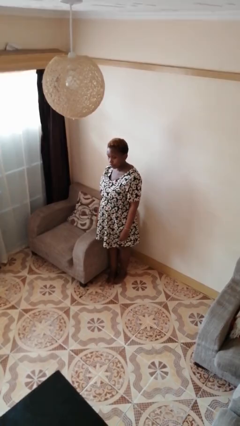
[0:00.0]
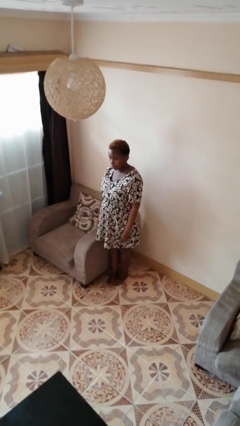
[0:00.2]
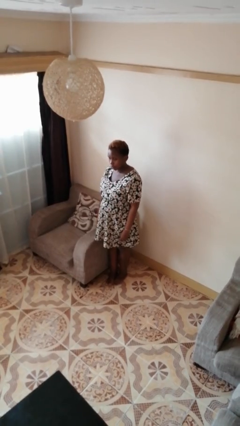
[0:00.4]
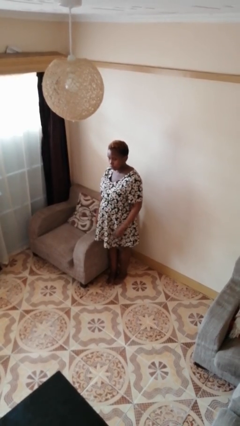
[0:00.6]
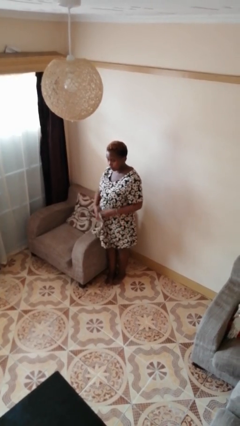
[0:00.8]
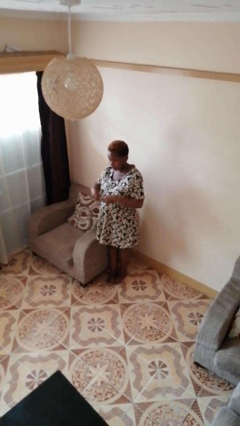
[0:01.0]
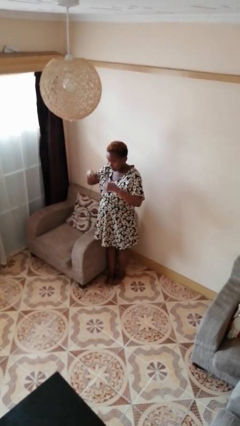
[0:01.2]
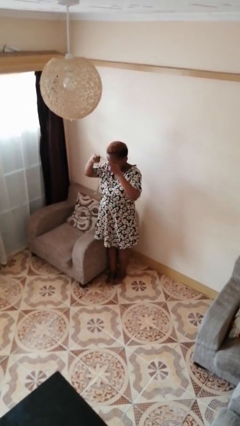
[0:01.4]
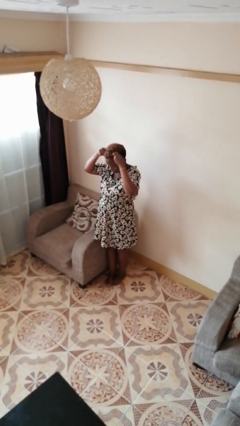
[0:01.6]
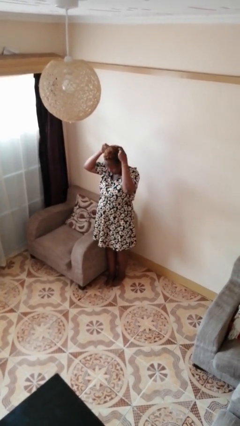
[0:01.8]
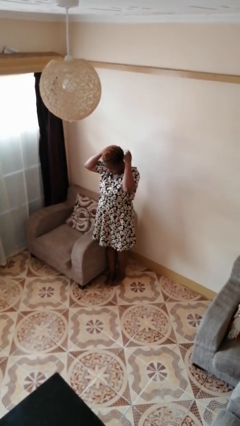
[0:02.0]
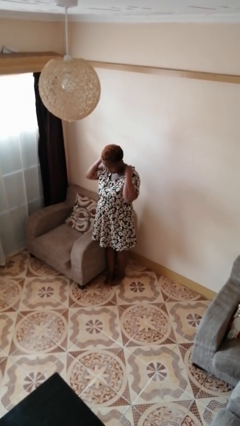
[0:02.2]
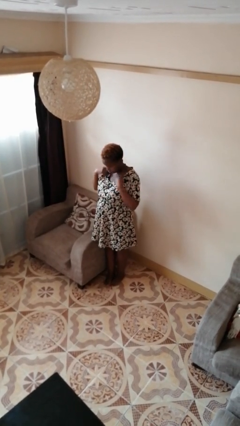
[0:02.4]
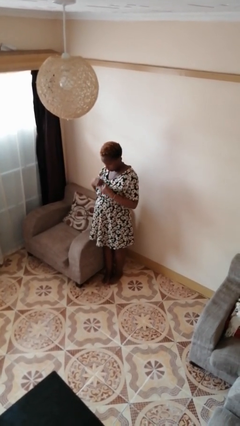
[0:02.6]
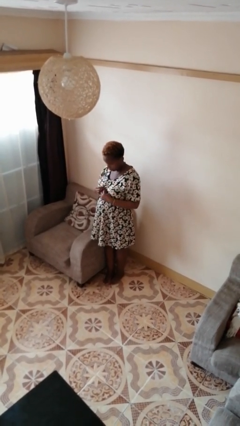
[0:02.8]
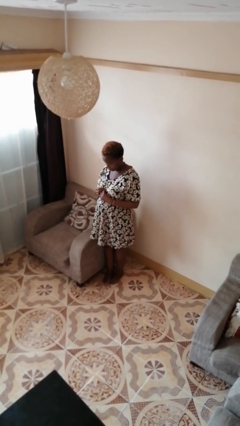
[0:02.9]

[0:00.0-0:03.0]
person puts on necklace

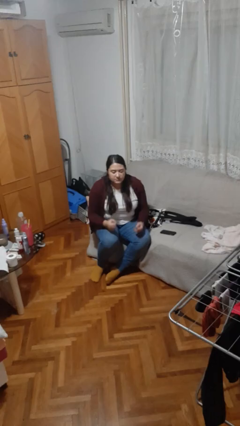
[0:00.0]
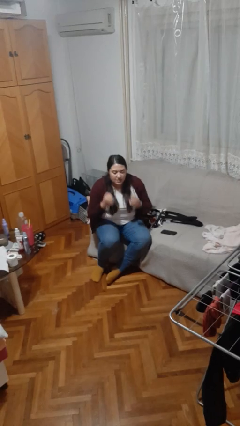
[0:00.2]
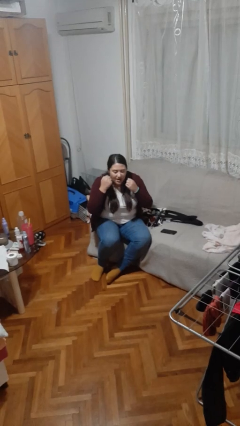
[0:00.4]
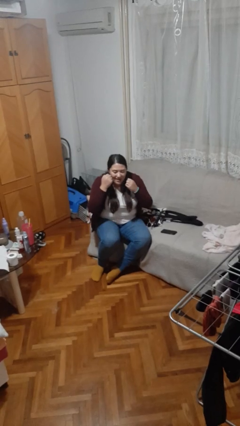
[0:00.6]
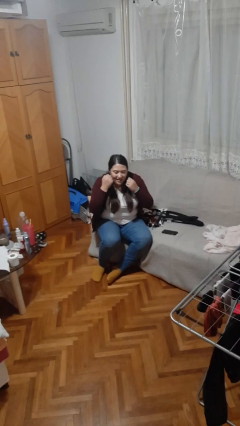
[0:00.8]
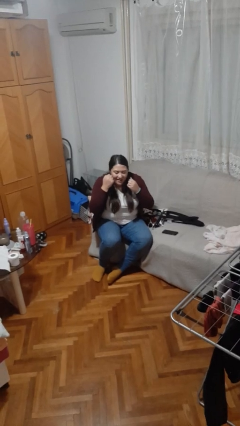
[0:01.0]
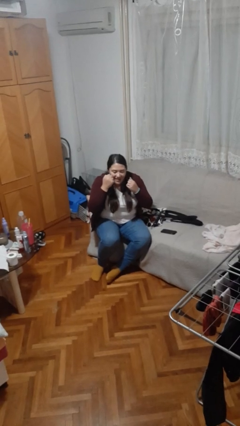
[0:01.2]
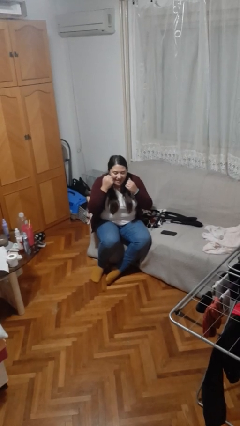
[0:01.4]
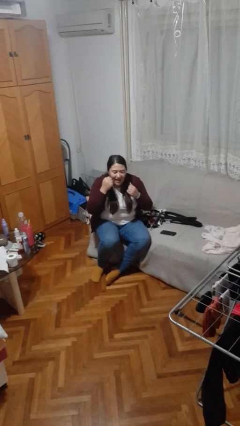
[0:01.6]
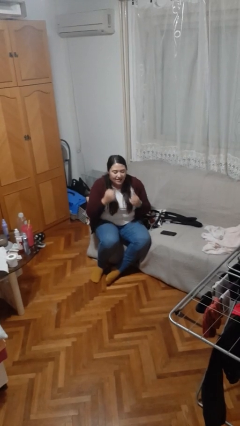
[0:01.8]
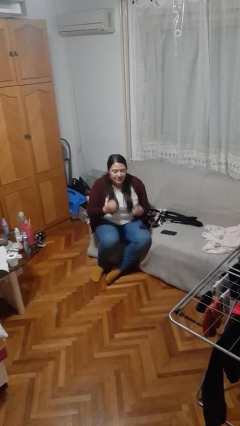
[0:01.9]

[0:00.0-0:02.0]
person flosses

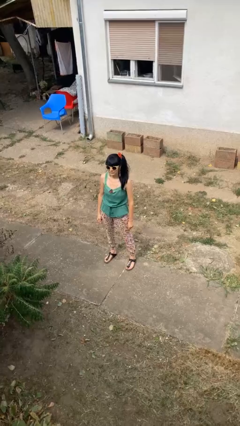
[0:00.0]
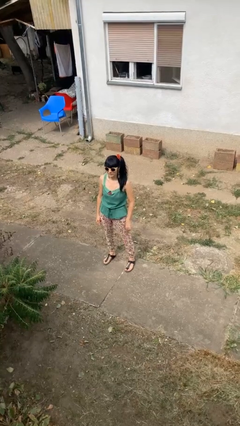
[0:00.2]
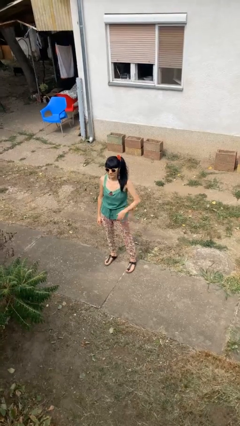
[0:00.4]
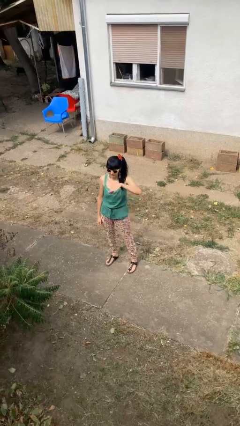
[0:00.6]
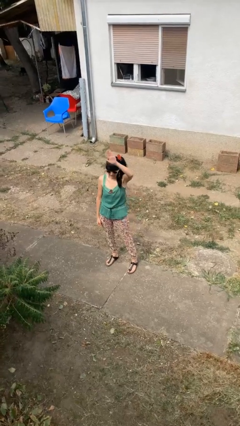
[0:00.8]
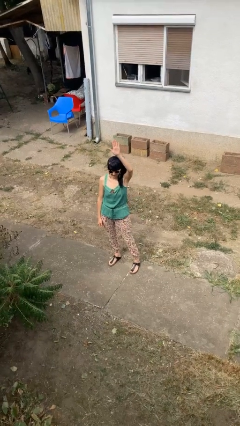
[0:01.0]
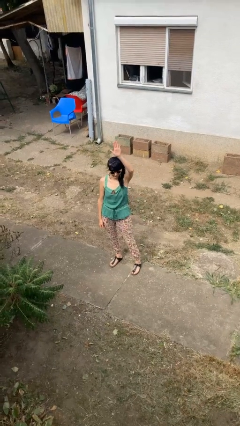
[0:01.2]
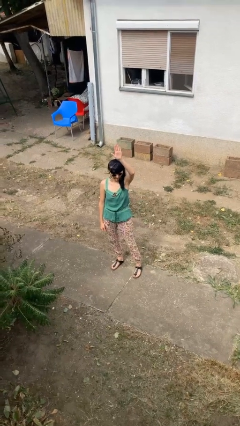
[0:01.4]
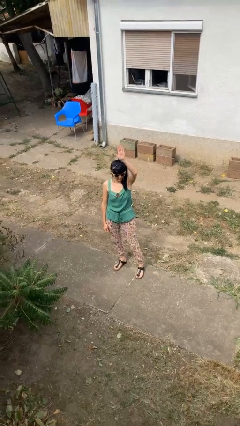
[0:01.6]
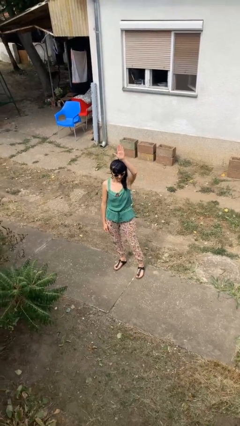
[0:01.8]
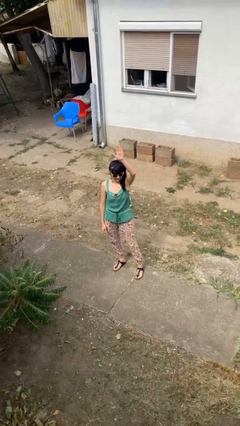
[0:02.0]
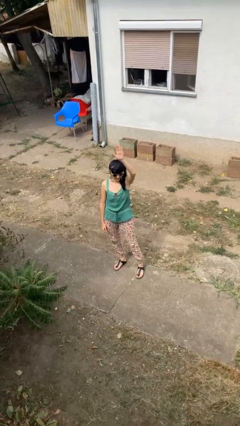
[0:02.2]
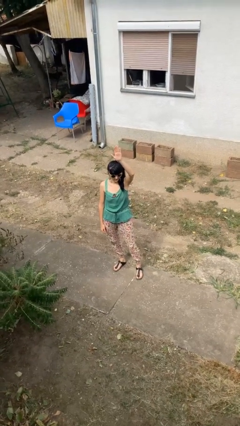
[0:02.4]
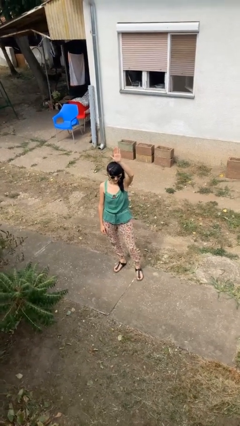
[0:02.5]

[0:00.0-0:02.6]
person gestures raise hand

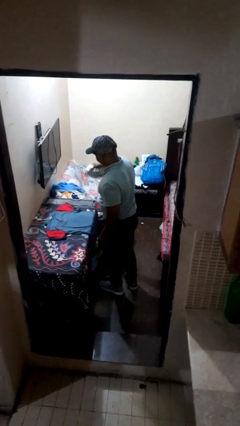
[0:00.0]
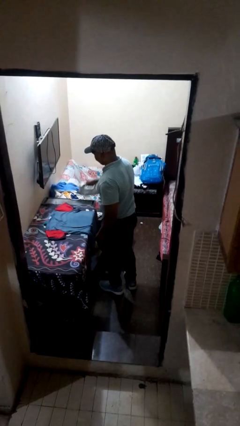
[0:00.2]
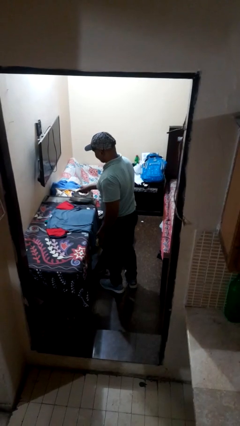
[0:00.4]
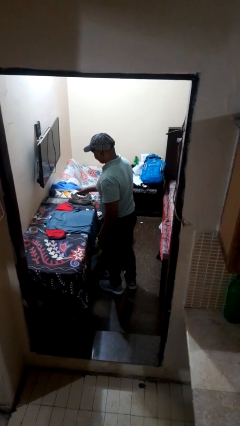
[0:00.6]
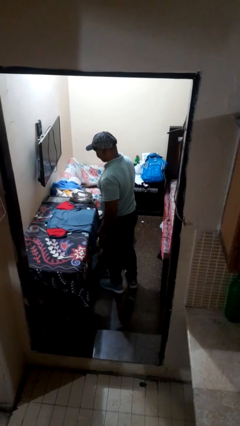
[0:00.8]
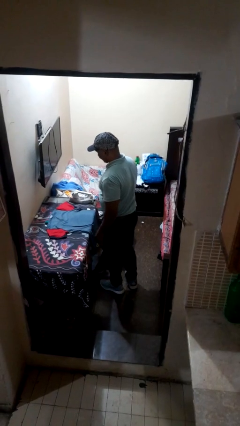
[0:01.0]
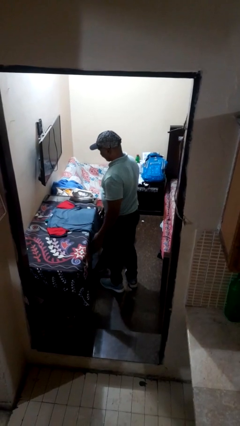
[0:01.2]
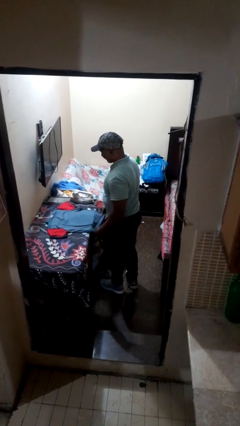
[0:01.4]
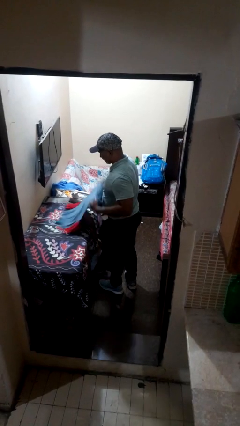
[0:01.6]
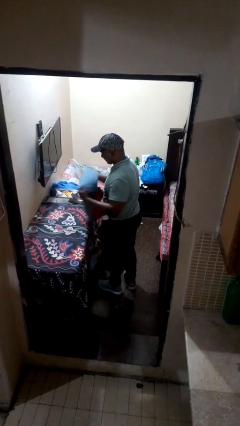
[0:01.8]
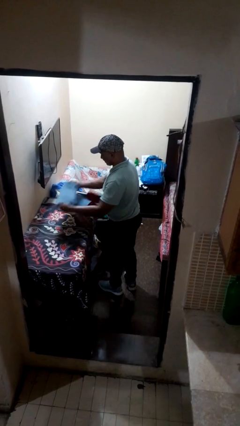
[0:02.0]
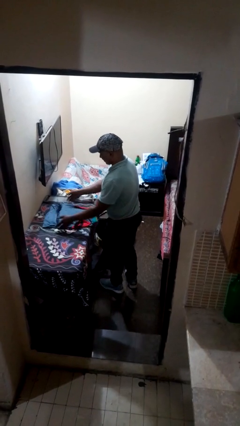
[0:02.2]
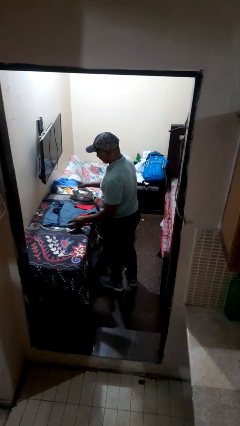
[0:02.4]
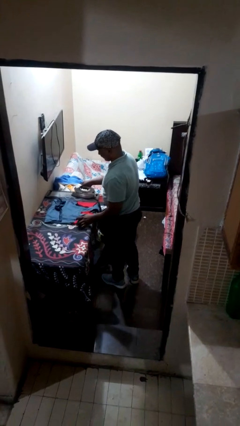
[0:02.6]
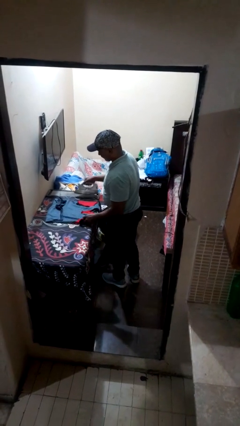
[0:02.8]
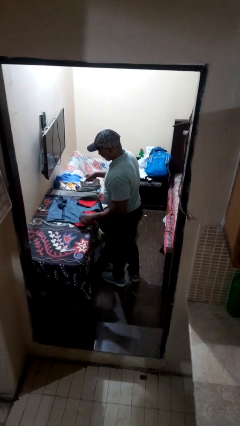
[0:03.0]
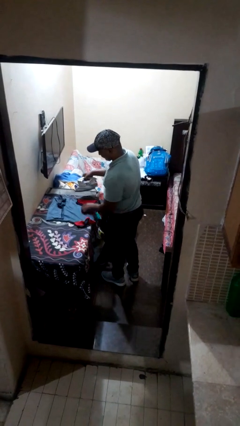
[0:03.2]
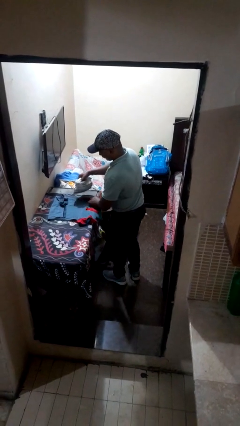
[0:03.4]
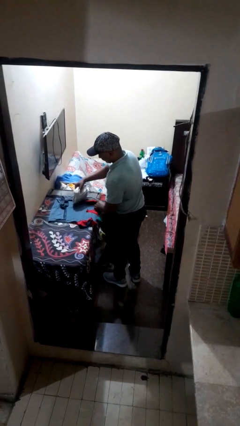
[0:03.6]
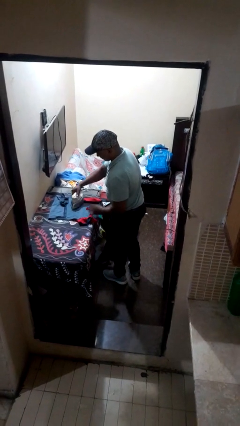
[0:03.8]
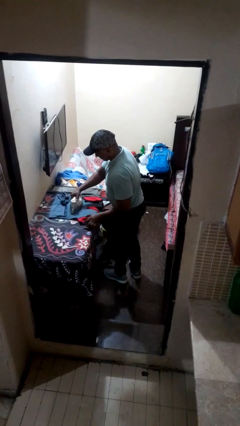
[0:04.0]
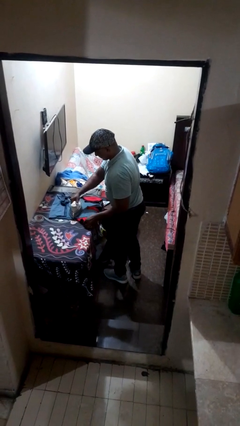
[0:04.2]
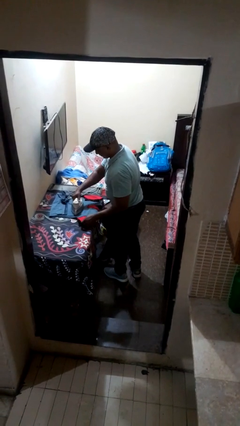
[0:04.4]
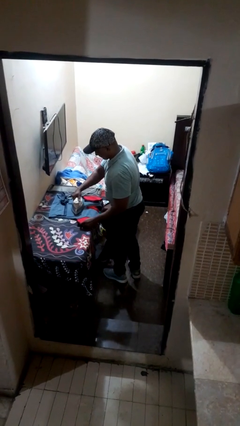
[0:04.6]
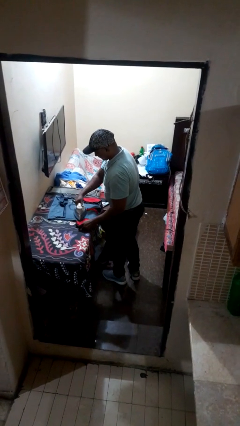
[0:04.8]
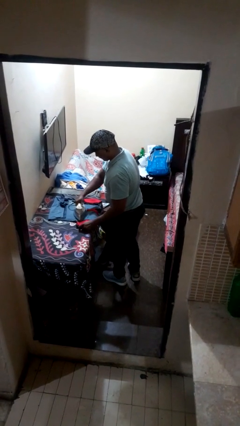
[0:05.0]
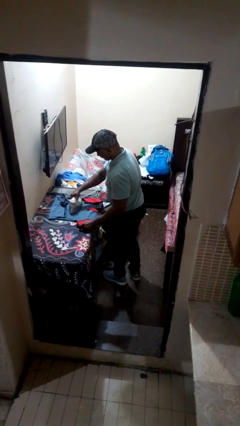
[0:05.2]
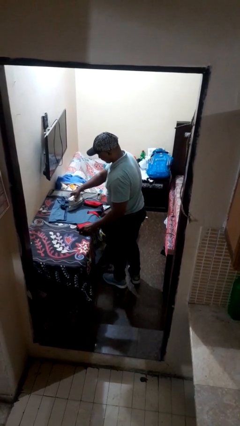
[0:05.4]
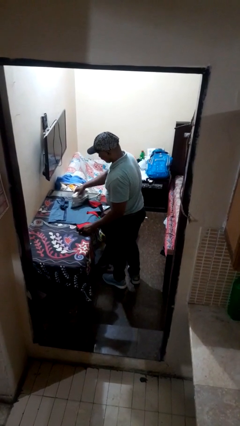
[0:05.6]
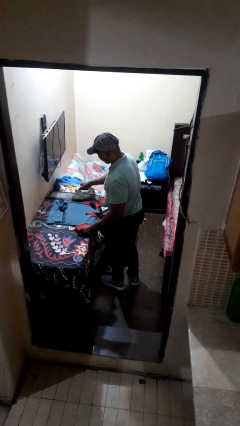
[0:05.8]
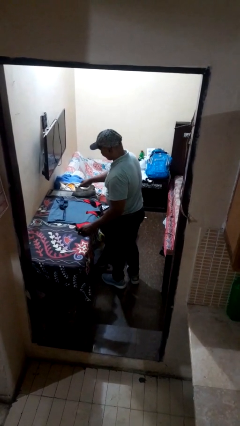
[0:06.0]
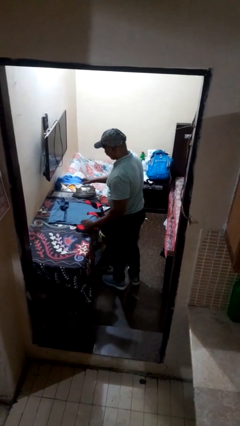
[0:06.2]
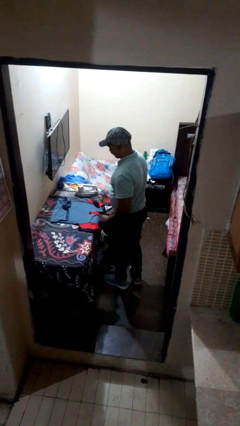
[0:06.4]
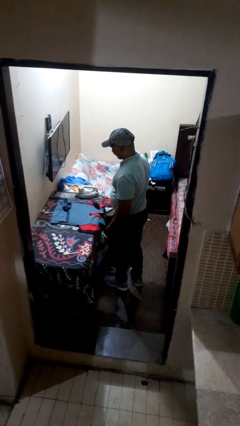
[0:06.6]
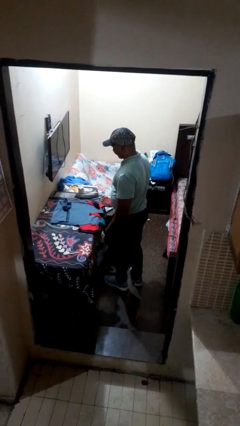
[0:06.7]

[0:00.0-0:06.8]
person irons clothes

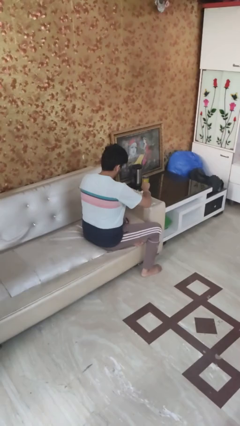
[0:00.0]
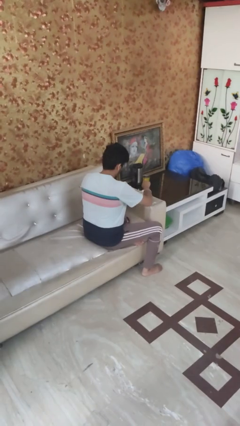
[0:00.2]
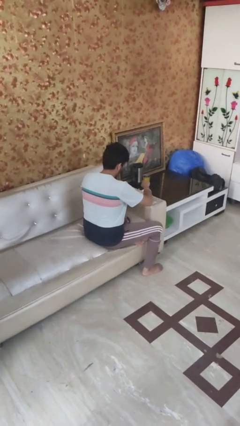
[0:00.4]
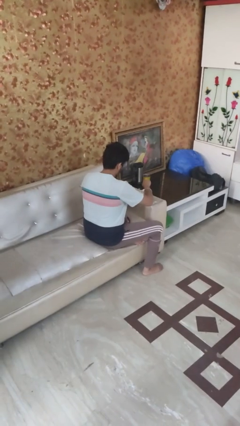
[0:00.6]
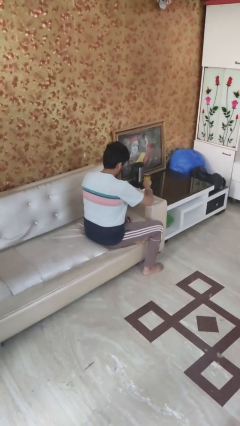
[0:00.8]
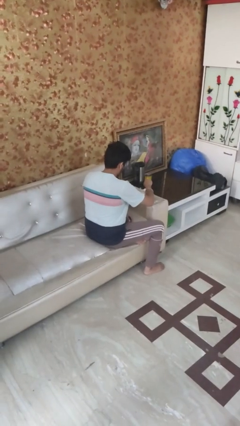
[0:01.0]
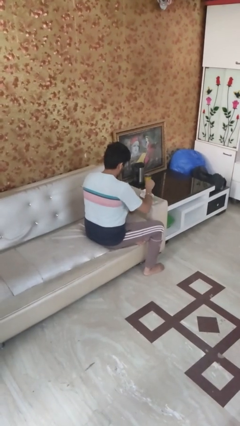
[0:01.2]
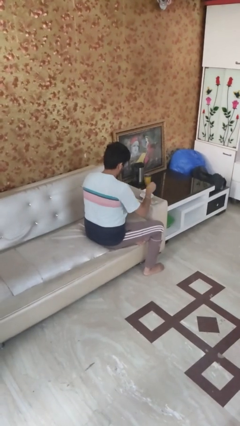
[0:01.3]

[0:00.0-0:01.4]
person stirs mug

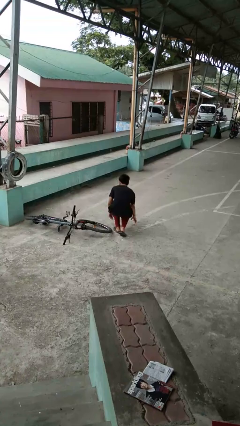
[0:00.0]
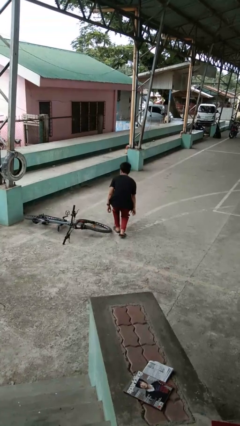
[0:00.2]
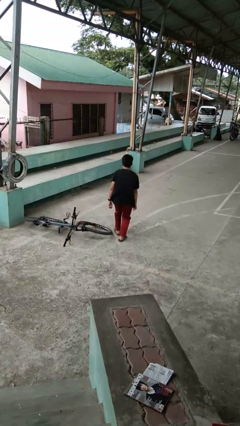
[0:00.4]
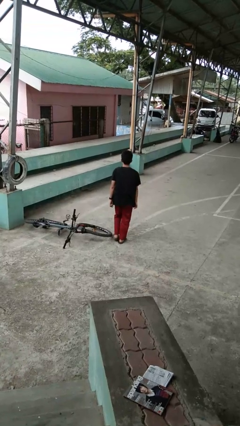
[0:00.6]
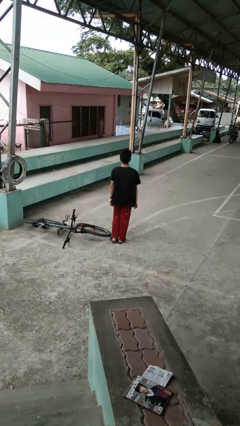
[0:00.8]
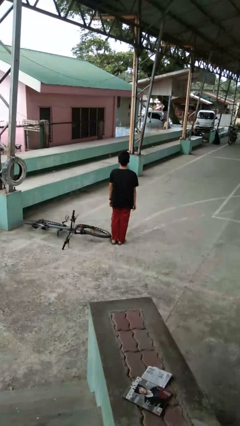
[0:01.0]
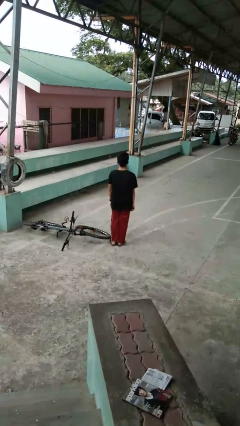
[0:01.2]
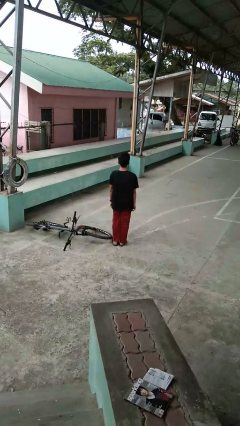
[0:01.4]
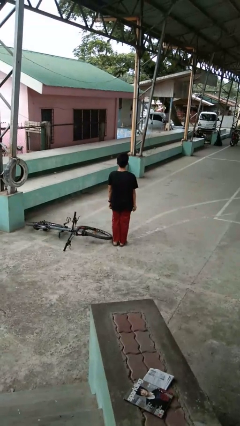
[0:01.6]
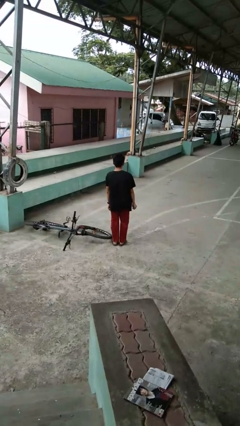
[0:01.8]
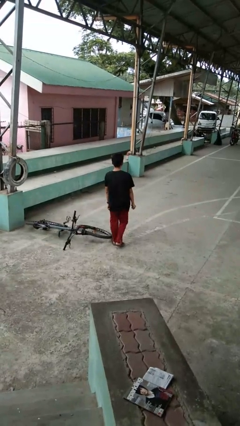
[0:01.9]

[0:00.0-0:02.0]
person stands up from floor
